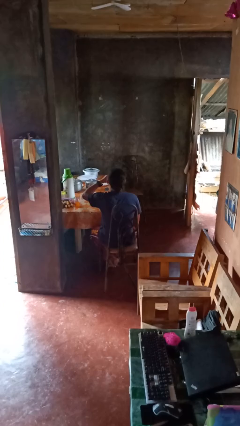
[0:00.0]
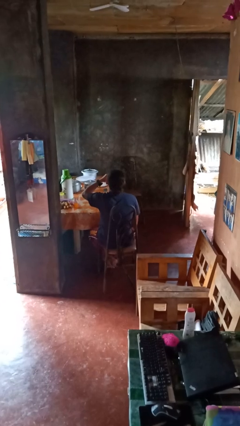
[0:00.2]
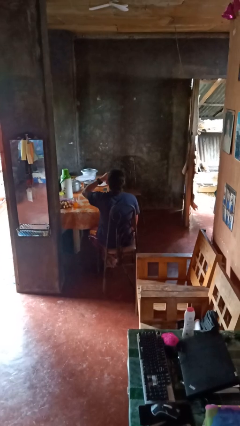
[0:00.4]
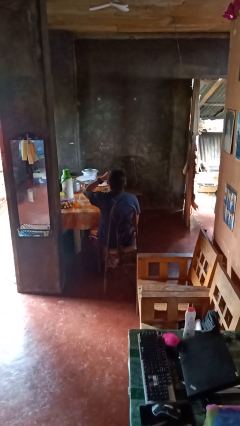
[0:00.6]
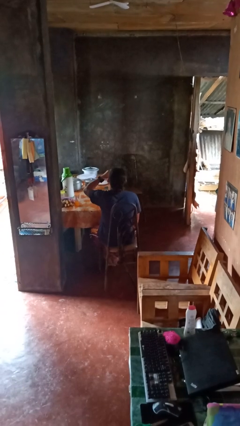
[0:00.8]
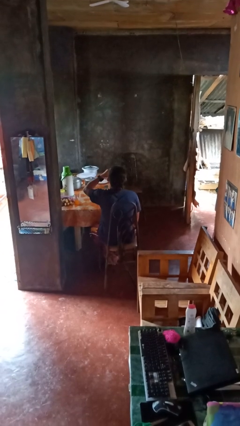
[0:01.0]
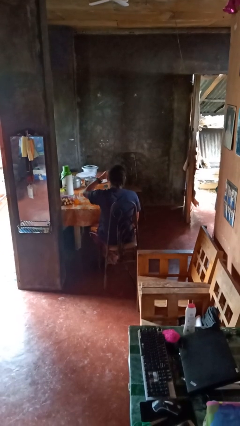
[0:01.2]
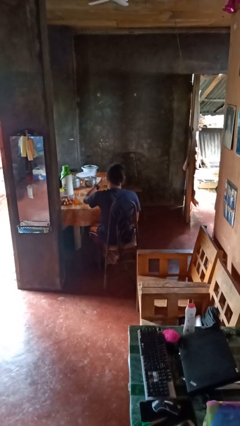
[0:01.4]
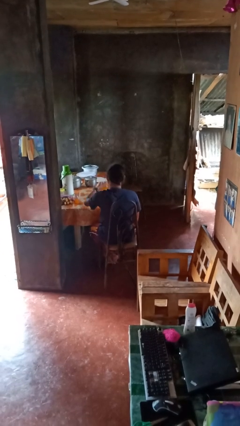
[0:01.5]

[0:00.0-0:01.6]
person drinks from shotglass

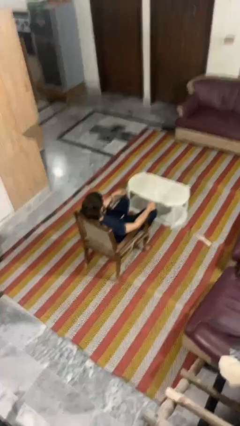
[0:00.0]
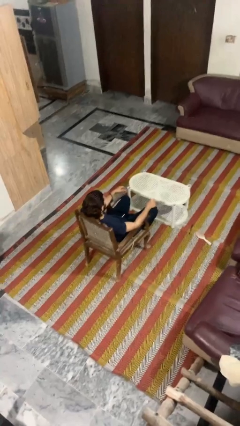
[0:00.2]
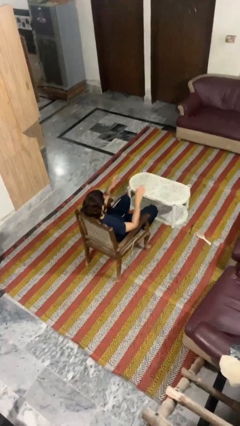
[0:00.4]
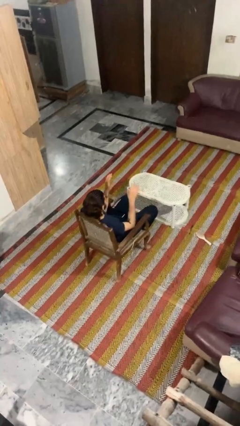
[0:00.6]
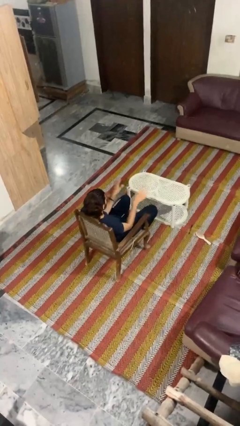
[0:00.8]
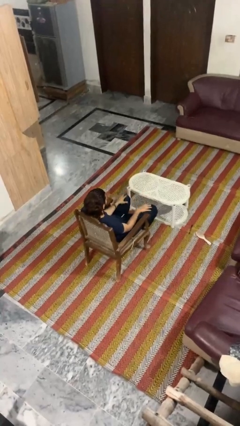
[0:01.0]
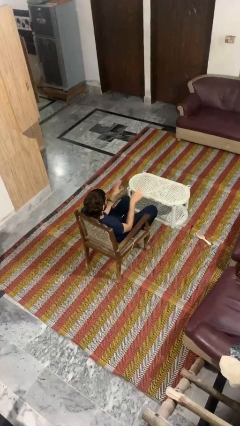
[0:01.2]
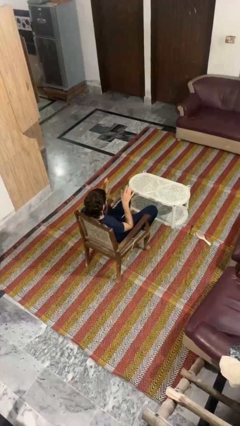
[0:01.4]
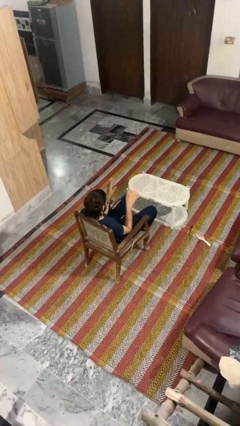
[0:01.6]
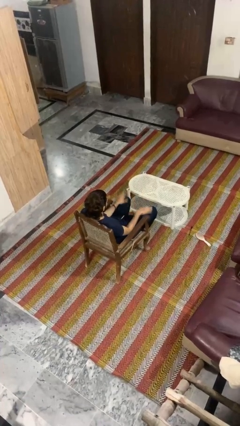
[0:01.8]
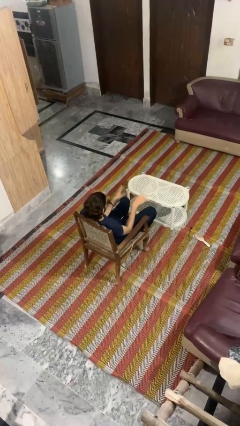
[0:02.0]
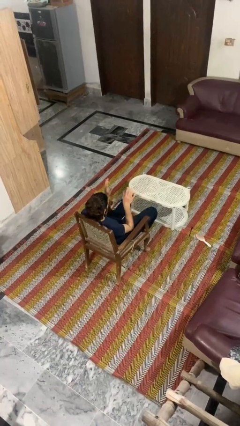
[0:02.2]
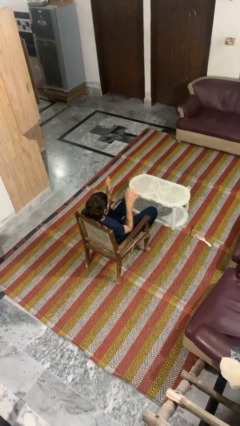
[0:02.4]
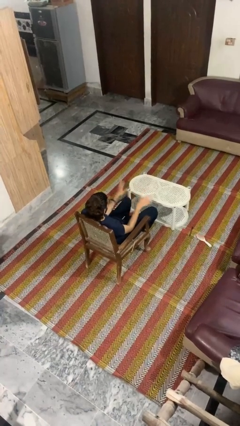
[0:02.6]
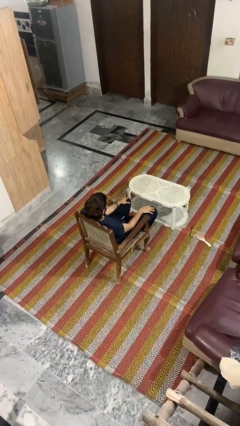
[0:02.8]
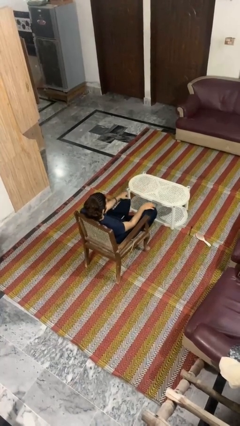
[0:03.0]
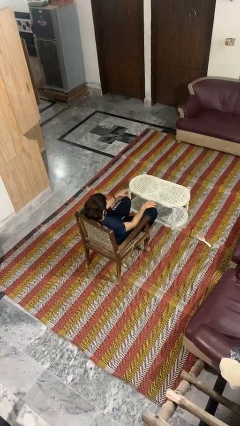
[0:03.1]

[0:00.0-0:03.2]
person slaps hands on thighs

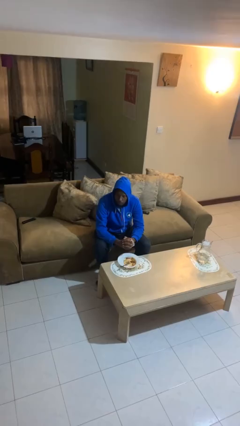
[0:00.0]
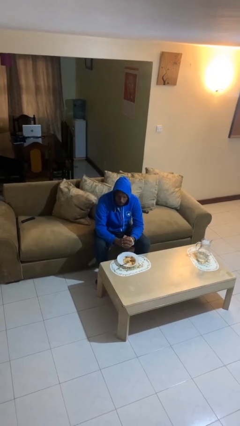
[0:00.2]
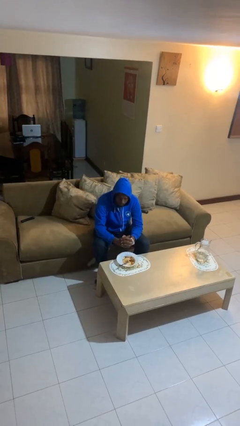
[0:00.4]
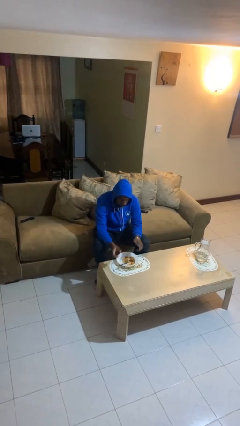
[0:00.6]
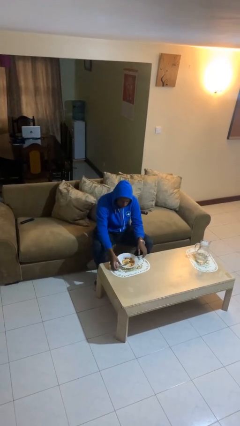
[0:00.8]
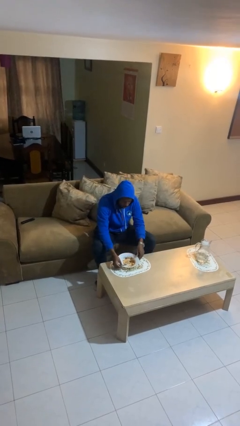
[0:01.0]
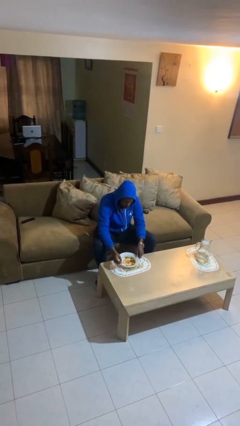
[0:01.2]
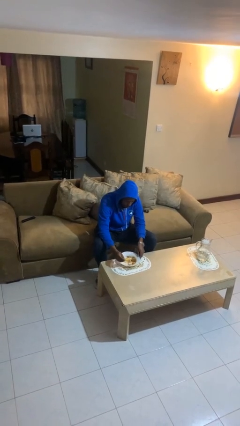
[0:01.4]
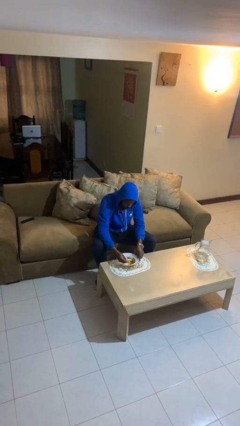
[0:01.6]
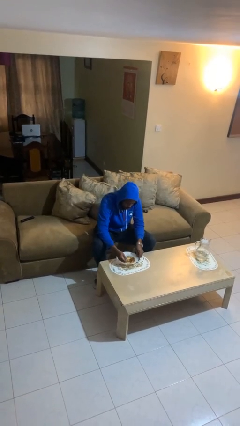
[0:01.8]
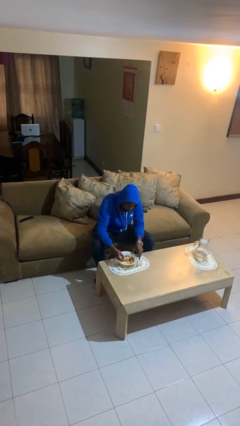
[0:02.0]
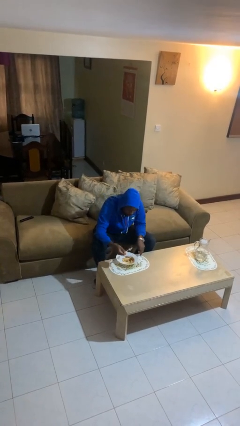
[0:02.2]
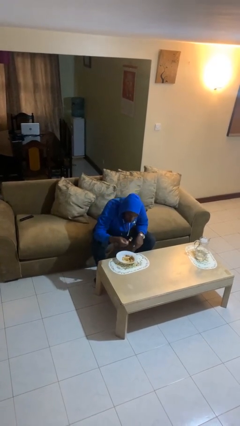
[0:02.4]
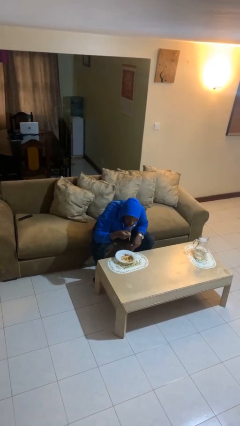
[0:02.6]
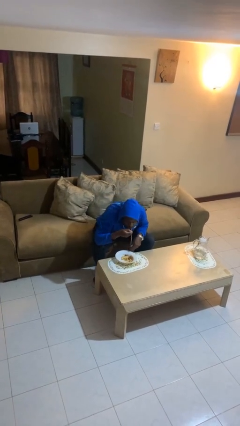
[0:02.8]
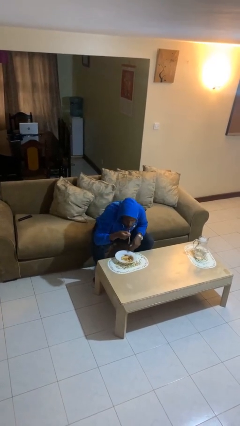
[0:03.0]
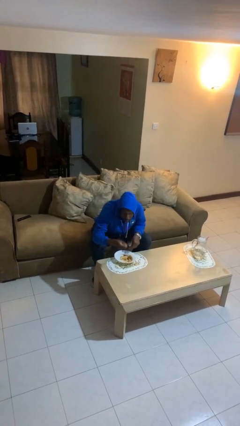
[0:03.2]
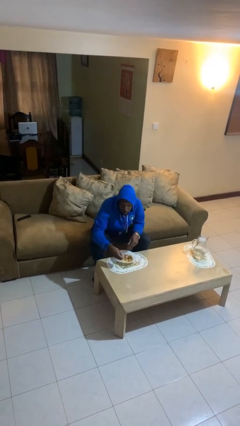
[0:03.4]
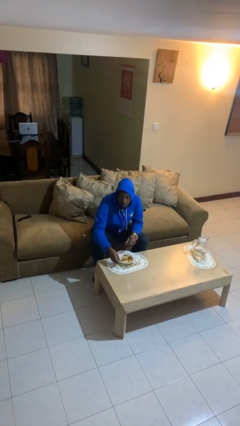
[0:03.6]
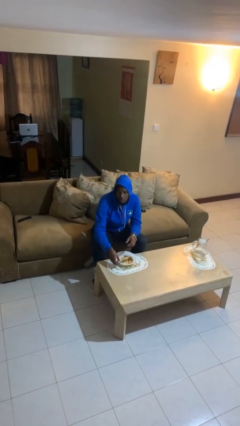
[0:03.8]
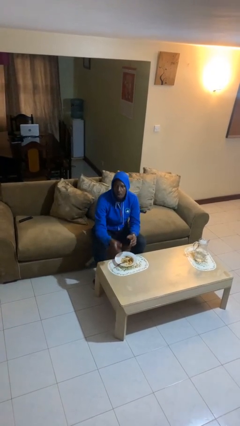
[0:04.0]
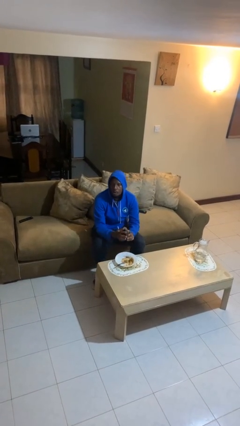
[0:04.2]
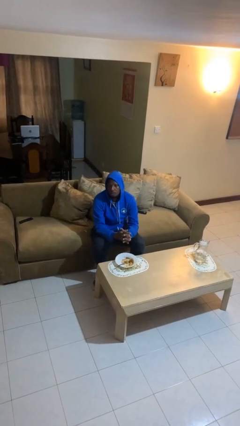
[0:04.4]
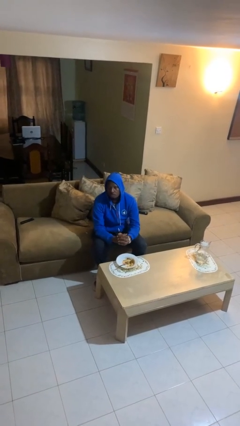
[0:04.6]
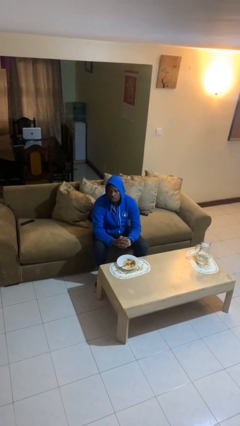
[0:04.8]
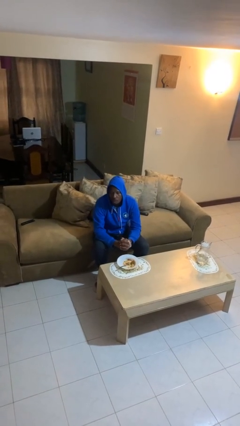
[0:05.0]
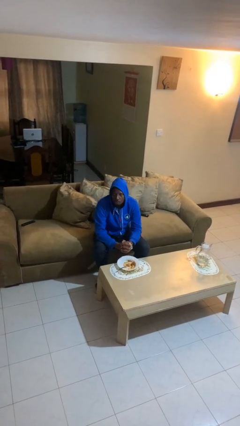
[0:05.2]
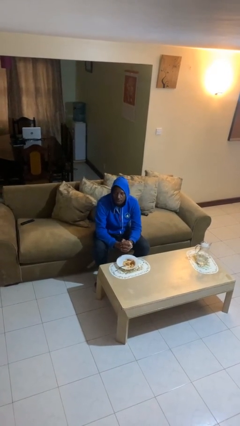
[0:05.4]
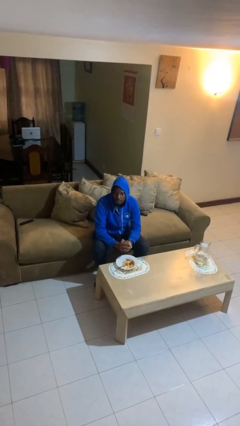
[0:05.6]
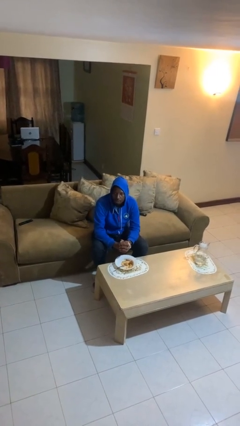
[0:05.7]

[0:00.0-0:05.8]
person eats with utensil

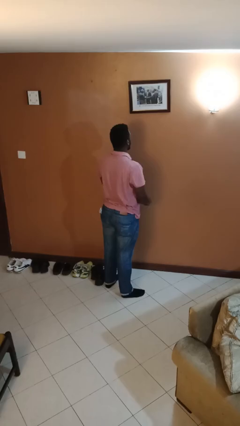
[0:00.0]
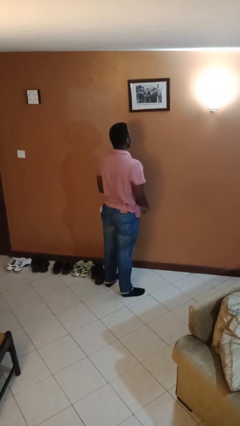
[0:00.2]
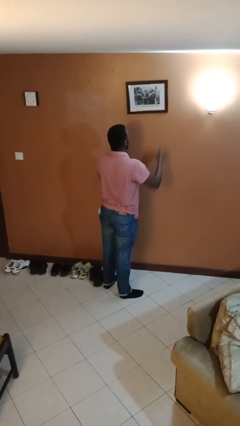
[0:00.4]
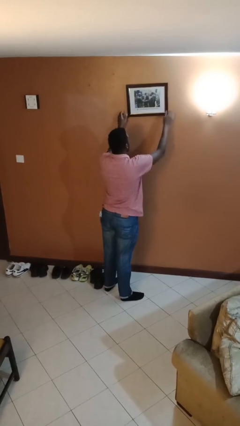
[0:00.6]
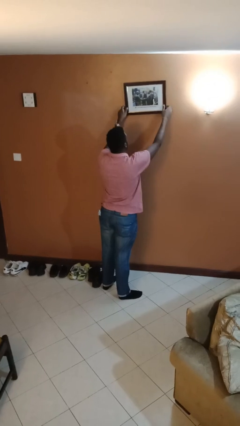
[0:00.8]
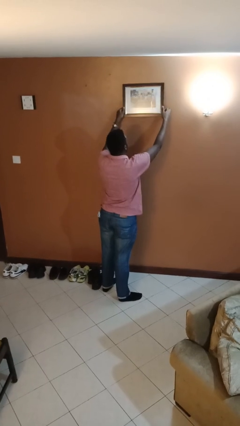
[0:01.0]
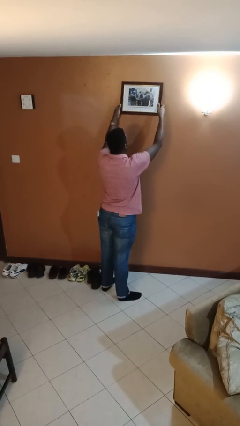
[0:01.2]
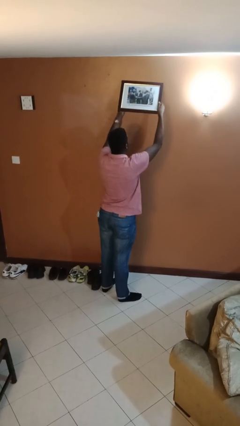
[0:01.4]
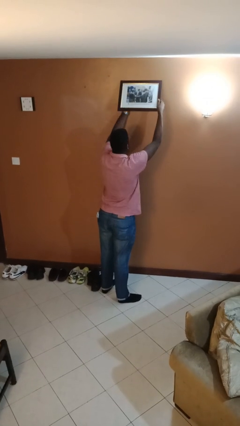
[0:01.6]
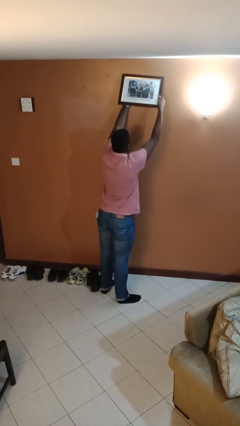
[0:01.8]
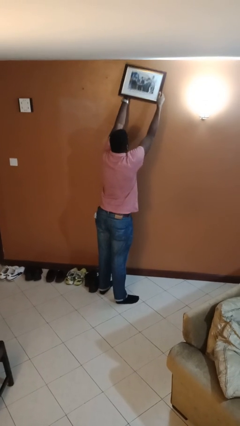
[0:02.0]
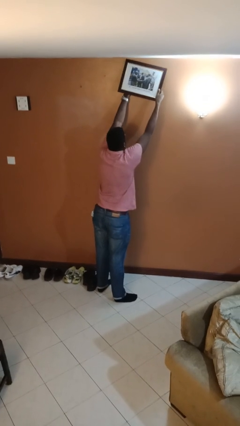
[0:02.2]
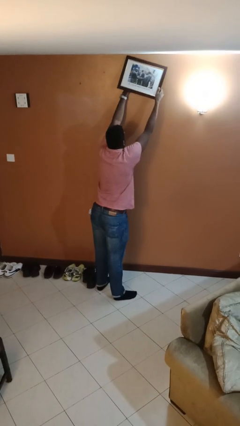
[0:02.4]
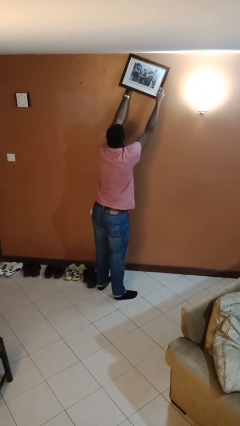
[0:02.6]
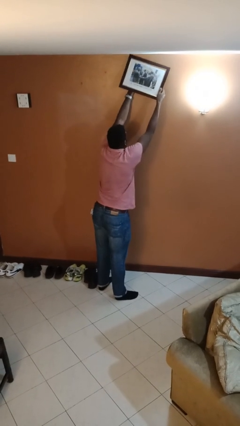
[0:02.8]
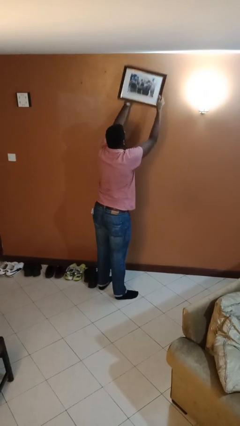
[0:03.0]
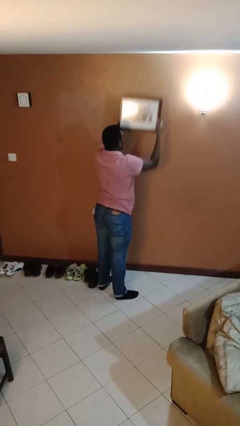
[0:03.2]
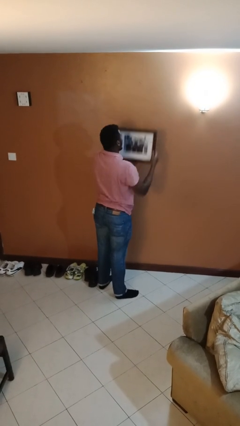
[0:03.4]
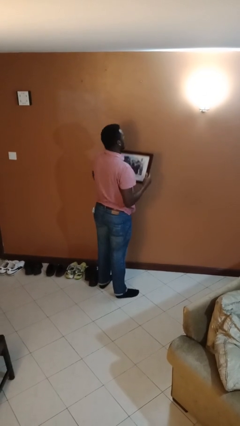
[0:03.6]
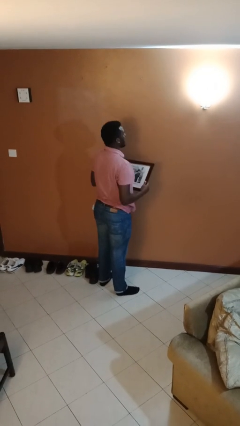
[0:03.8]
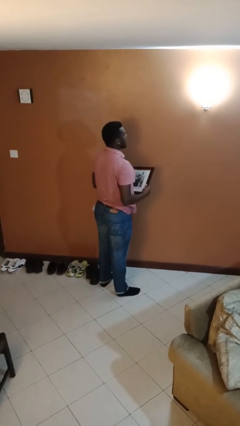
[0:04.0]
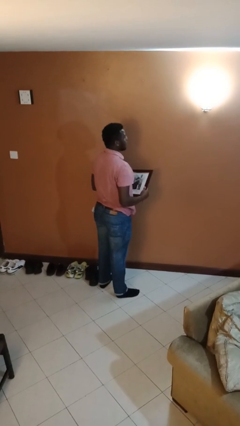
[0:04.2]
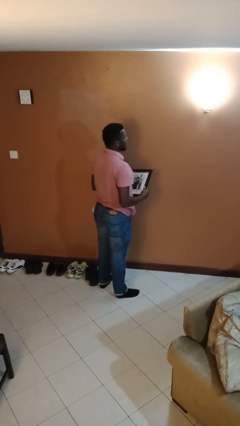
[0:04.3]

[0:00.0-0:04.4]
person takes down picture frame

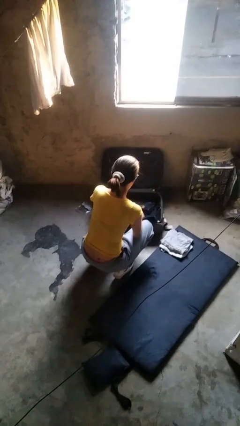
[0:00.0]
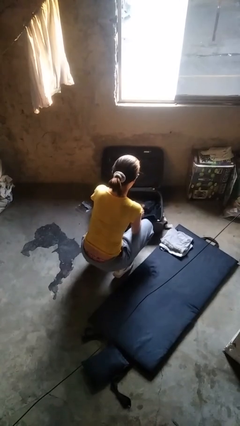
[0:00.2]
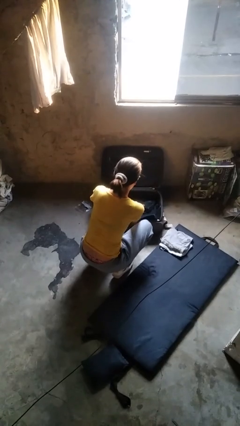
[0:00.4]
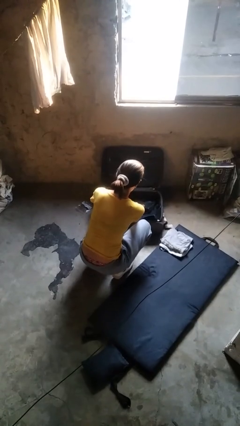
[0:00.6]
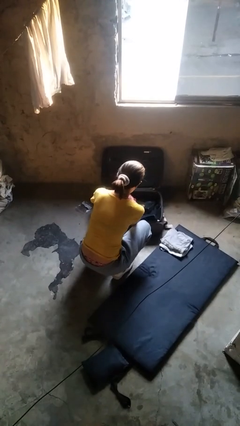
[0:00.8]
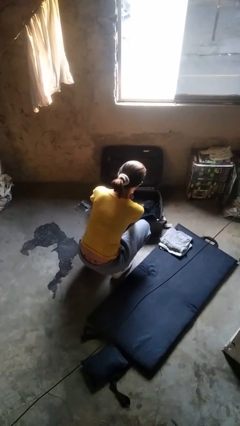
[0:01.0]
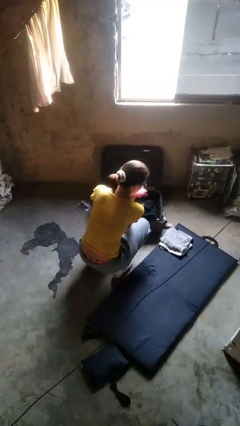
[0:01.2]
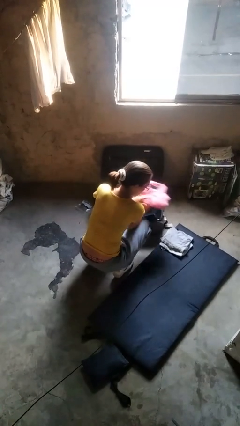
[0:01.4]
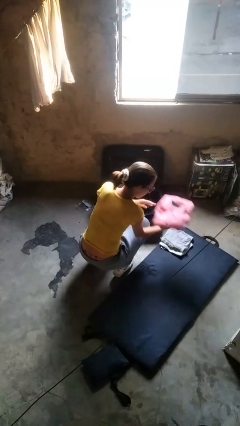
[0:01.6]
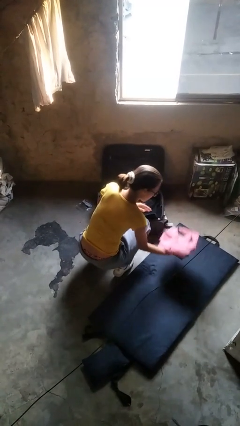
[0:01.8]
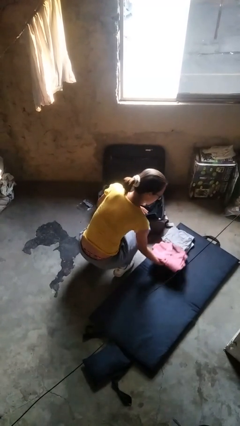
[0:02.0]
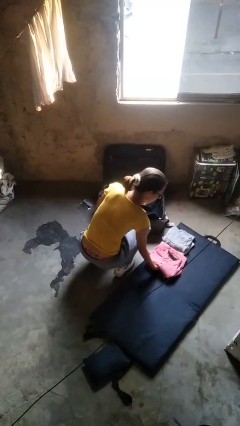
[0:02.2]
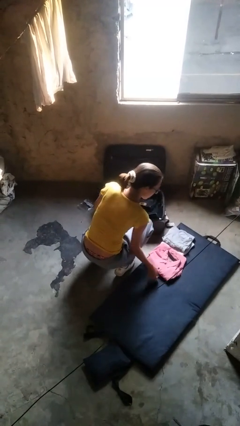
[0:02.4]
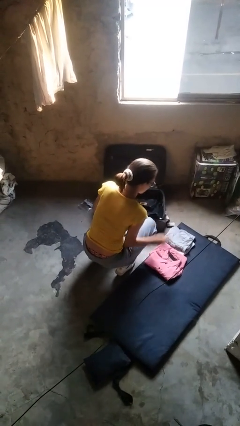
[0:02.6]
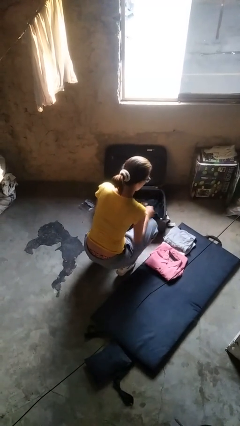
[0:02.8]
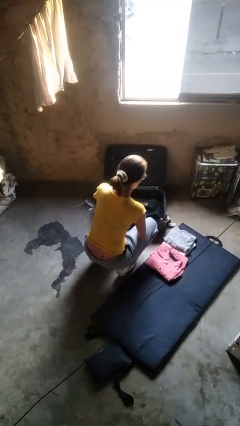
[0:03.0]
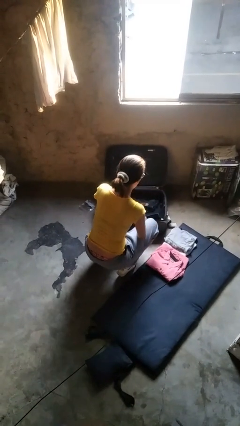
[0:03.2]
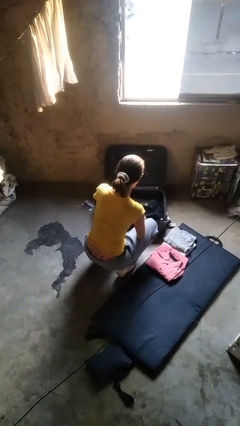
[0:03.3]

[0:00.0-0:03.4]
person unloads clothes from suitcase
